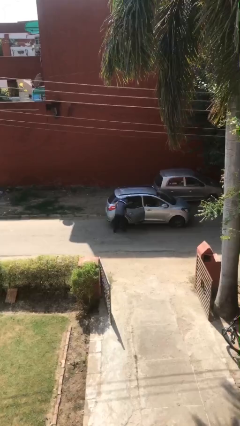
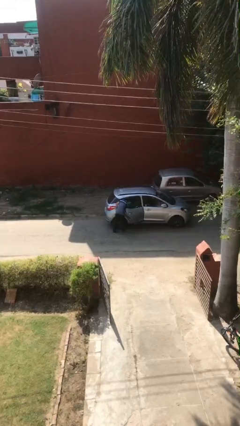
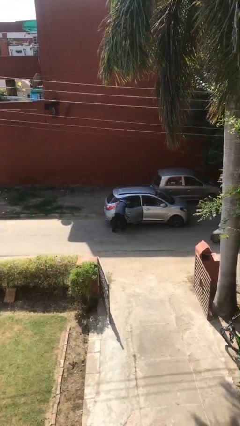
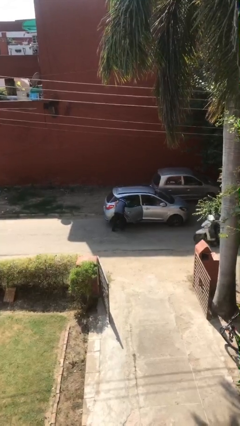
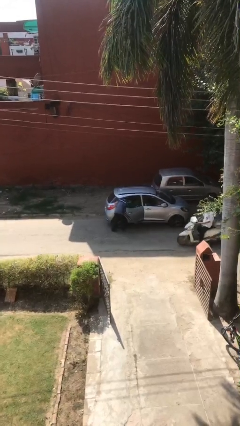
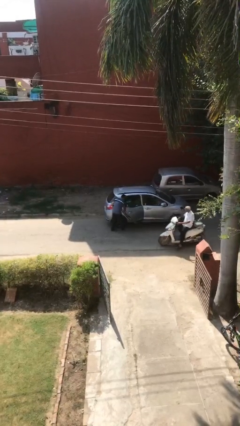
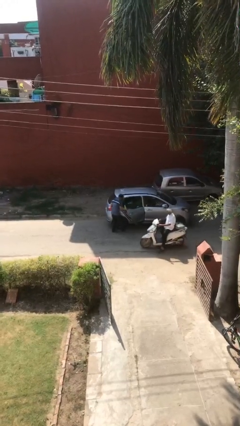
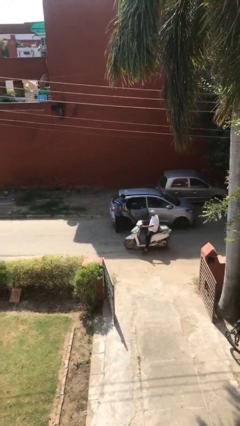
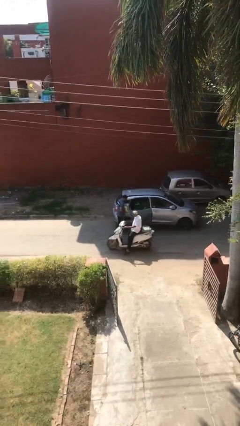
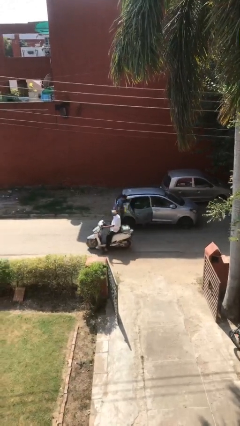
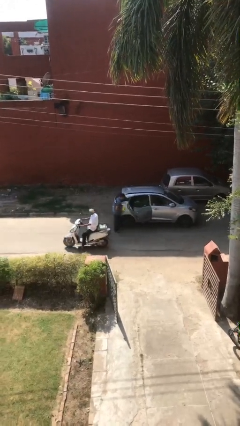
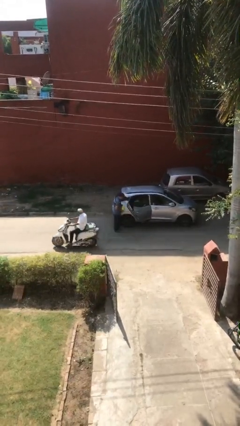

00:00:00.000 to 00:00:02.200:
person unloads car

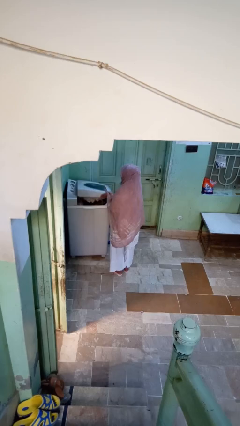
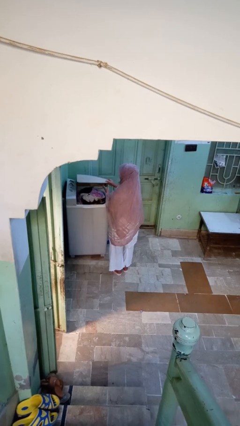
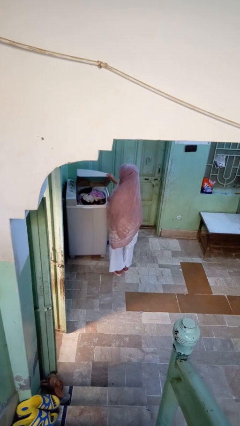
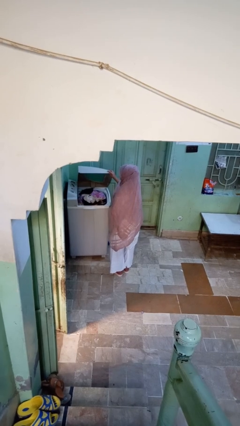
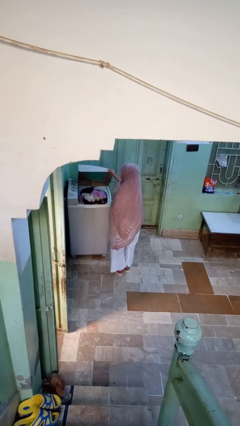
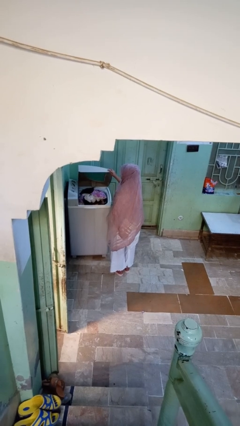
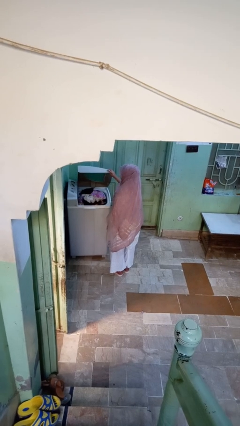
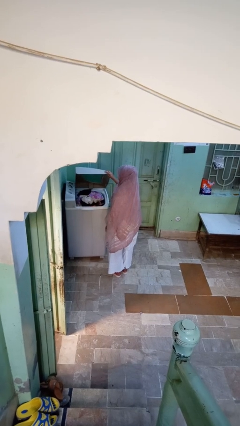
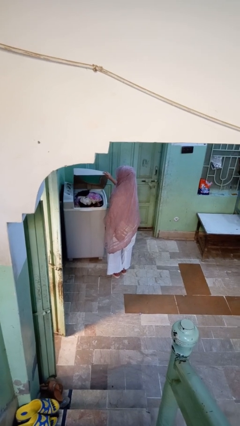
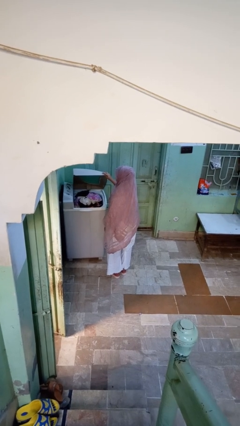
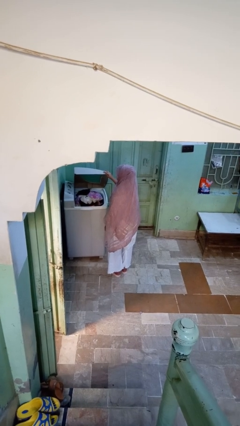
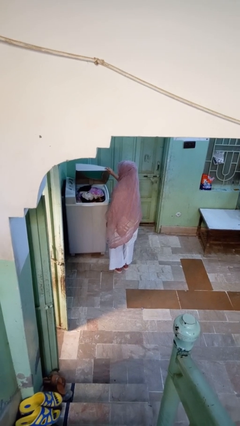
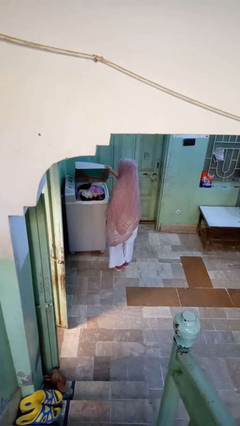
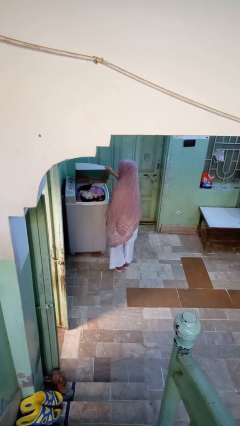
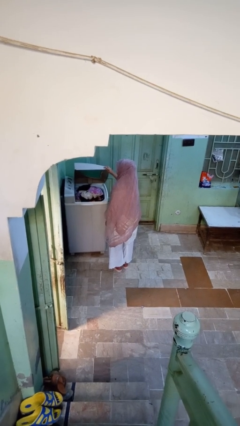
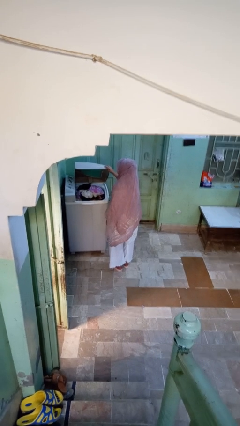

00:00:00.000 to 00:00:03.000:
person opens clothes washer

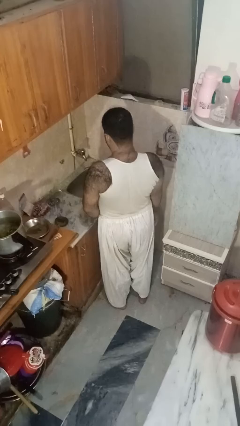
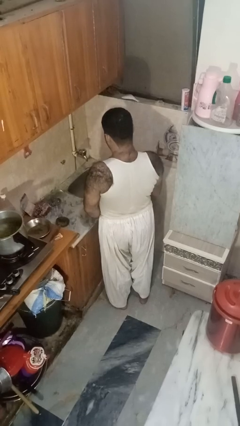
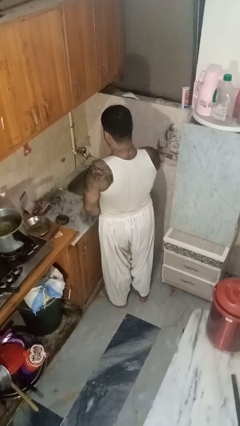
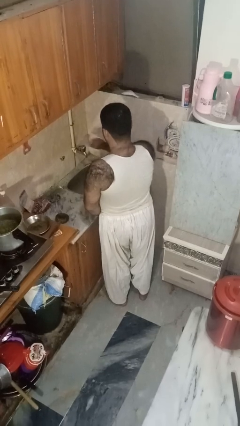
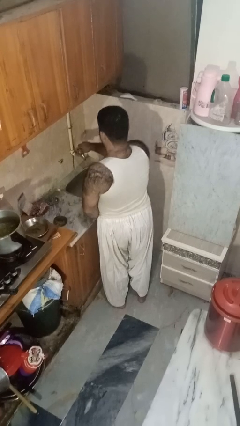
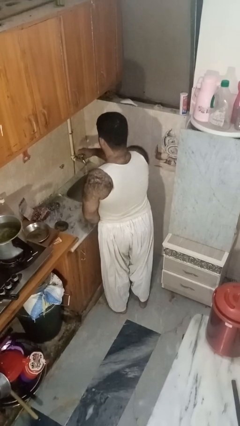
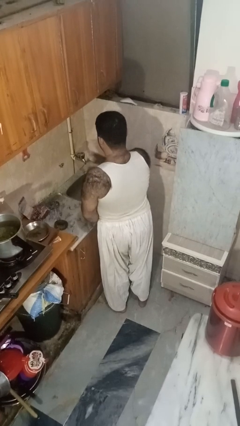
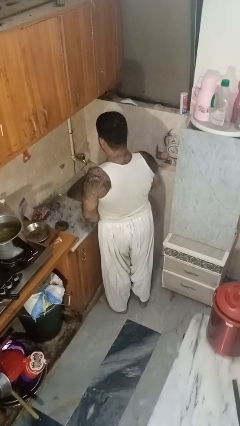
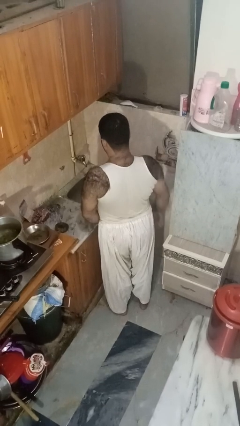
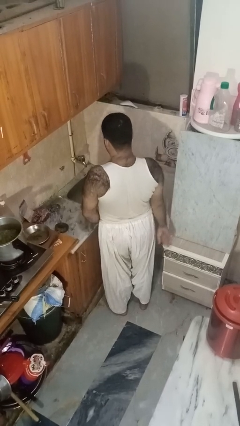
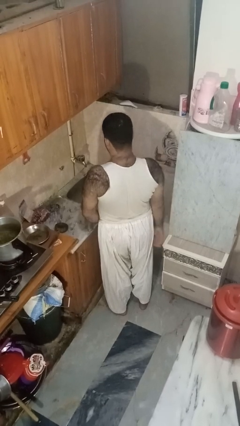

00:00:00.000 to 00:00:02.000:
person turns on faucet

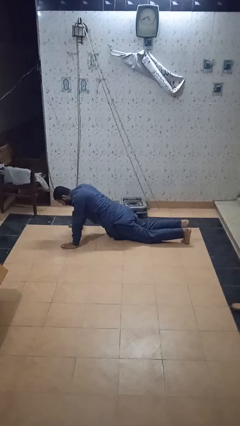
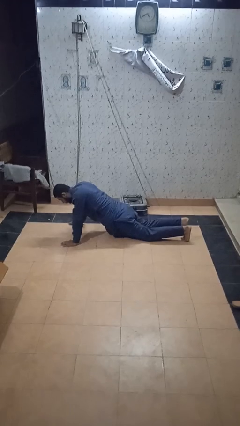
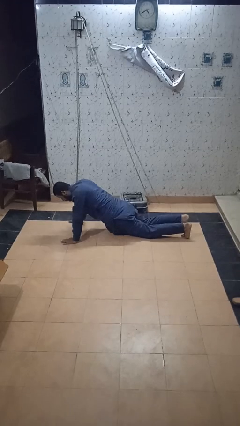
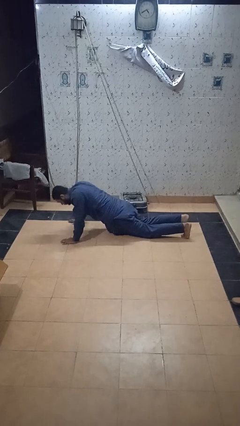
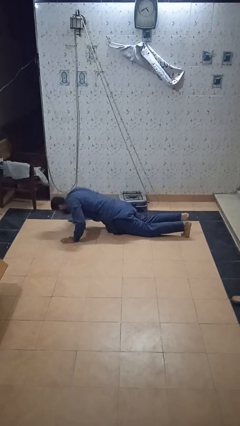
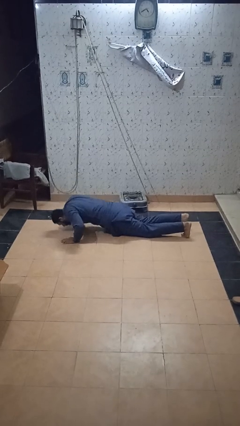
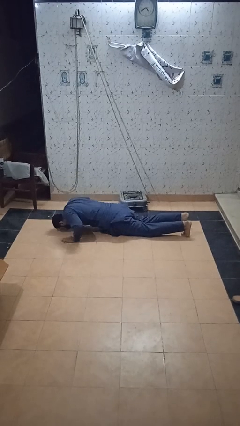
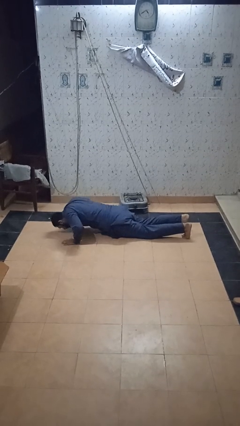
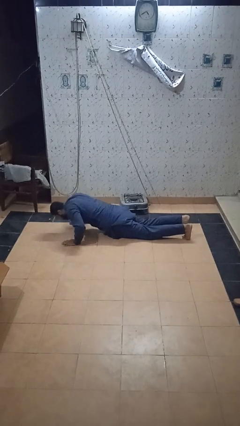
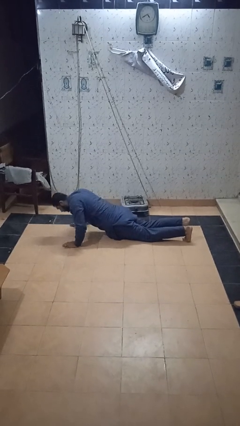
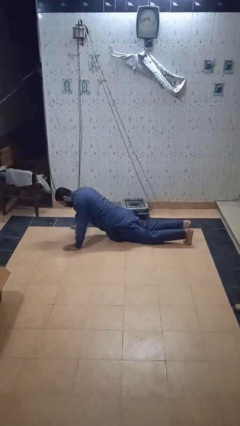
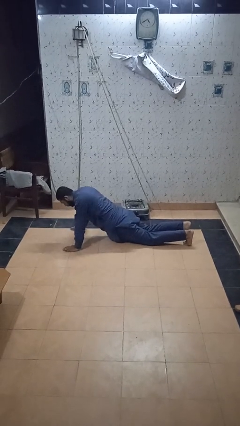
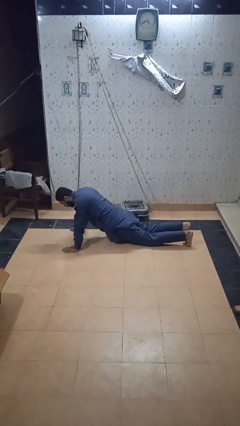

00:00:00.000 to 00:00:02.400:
person exercises with pushup

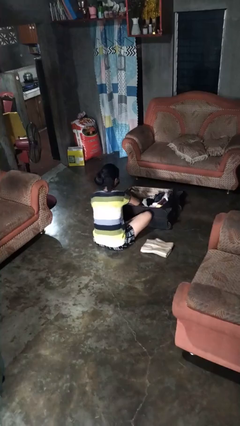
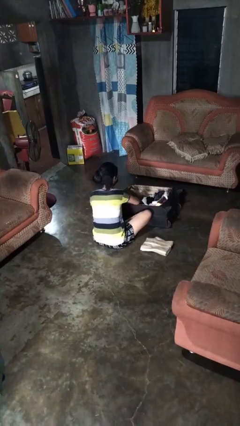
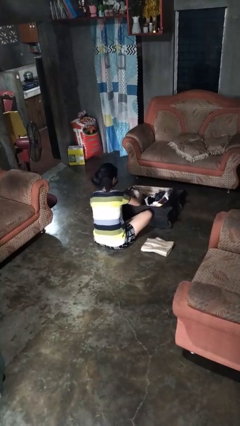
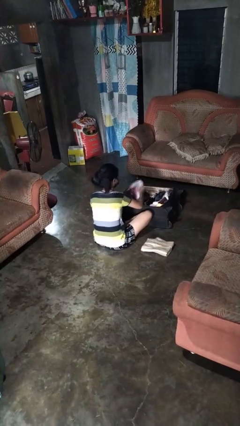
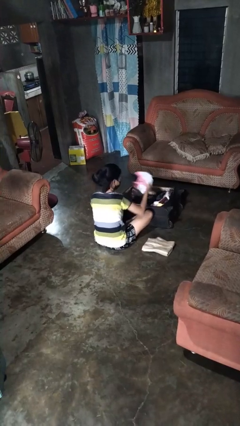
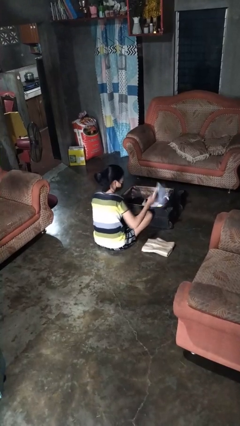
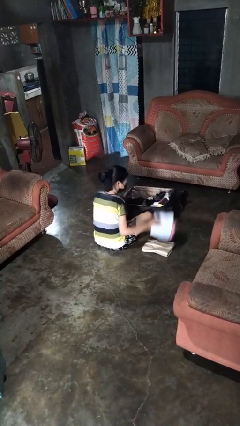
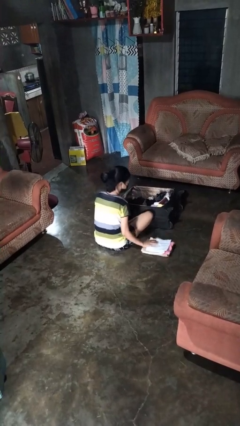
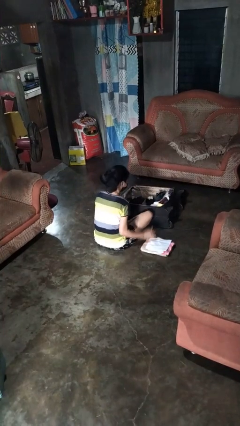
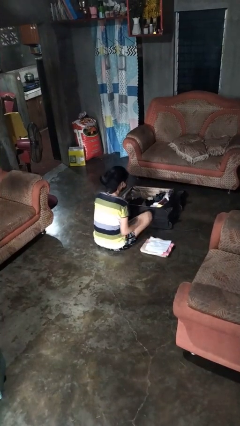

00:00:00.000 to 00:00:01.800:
person unloads clothes from suitcase

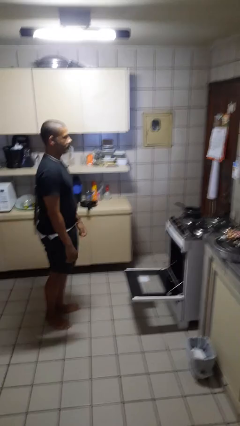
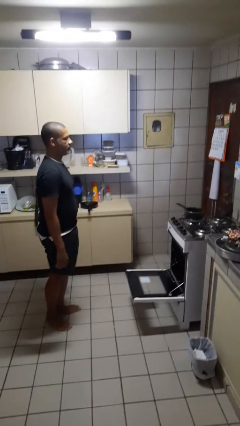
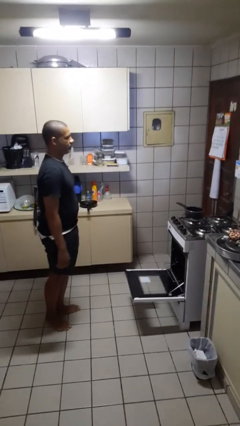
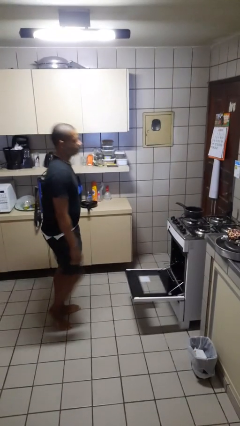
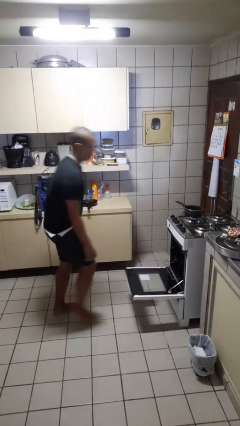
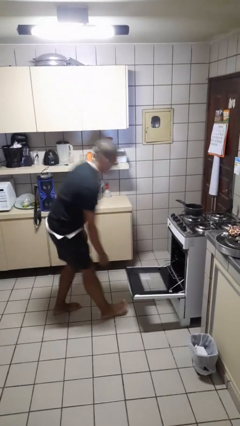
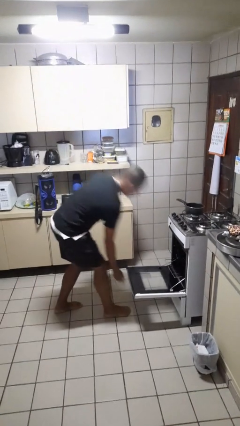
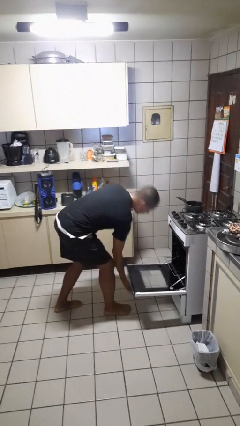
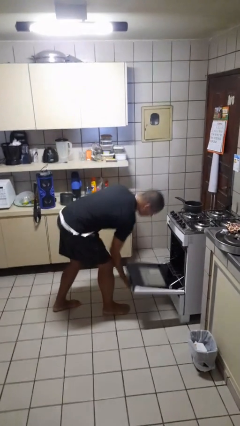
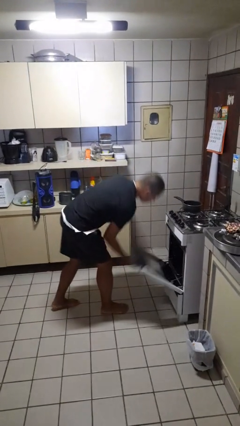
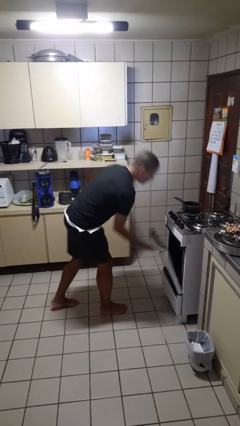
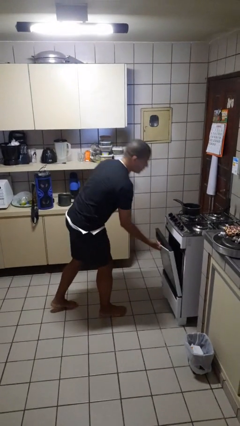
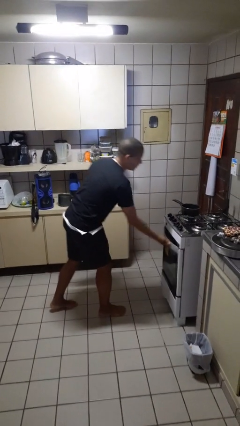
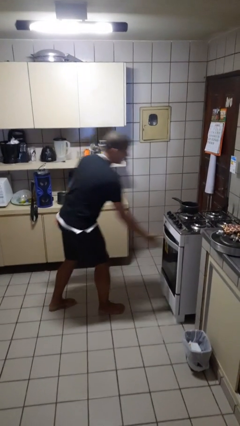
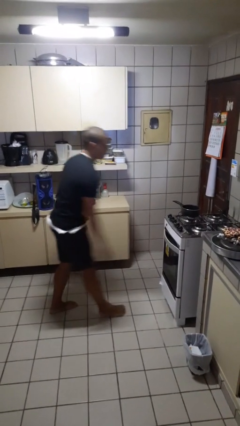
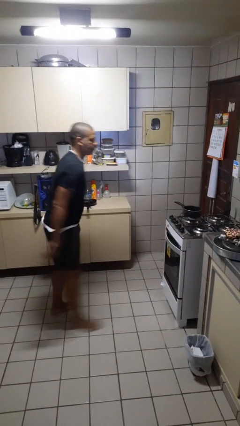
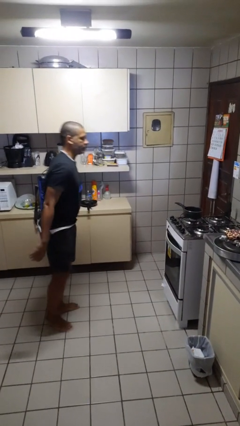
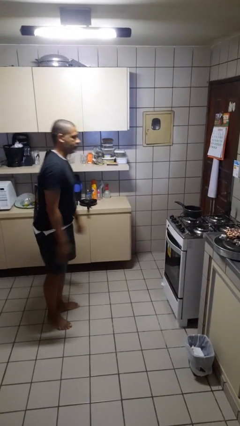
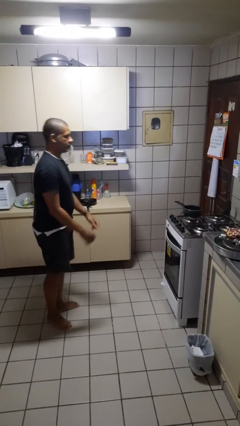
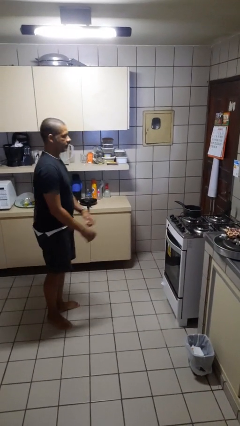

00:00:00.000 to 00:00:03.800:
person closes oven door

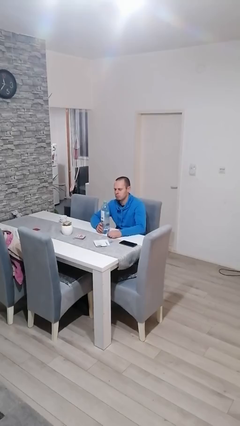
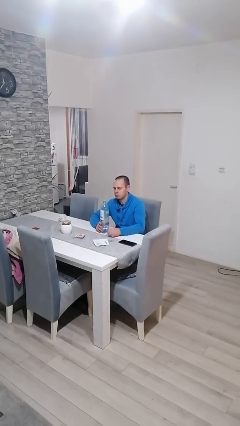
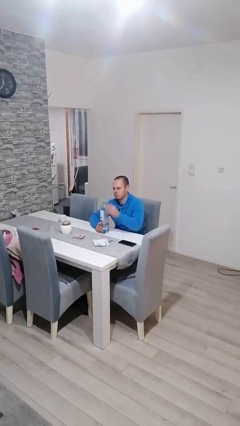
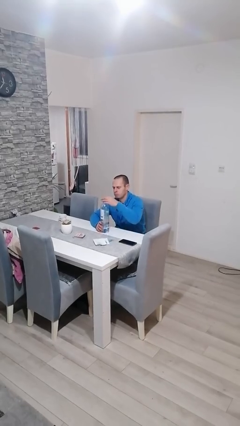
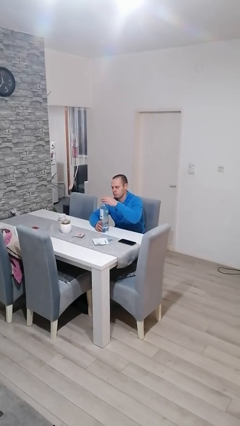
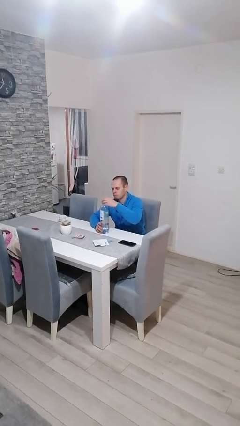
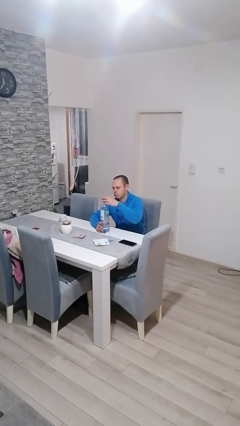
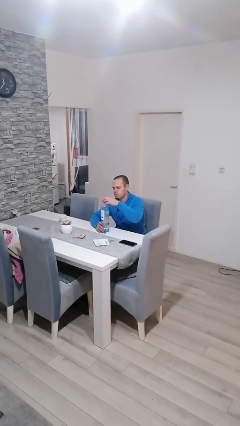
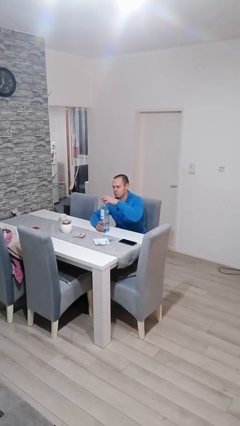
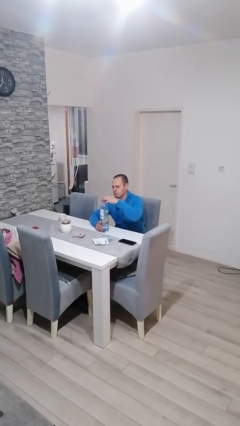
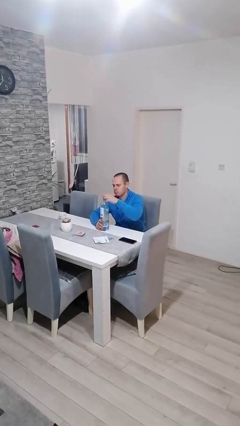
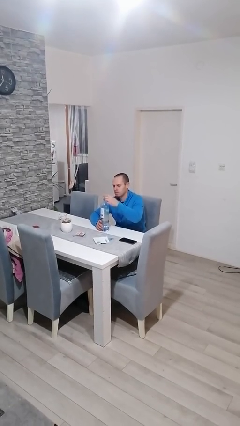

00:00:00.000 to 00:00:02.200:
person unscrews lid from bottle
